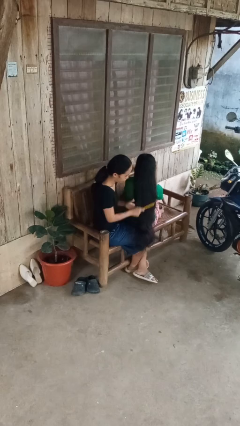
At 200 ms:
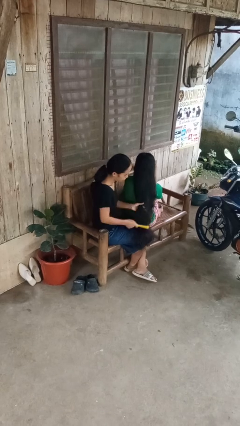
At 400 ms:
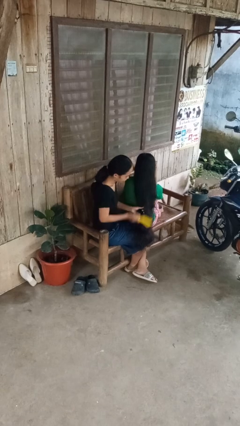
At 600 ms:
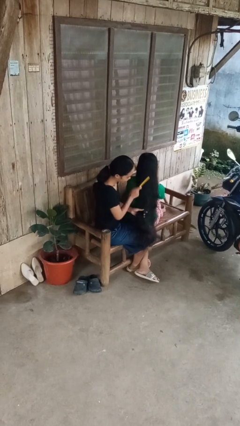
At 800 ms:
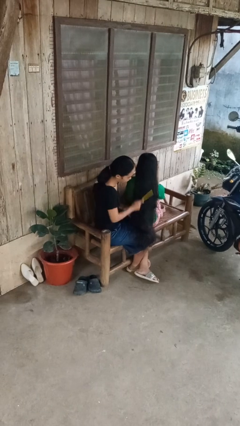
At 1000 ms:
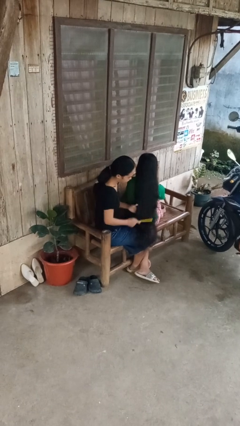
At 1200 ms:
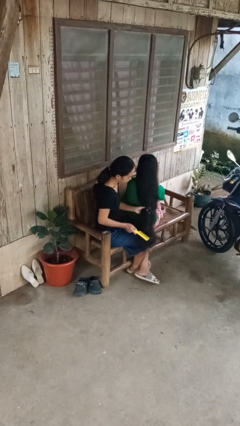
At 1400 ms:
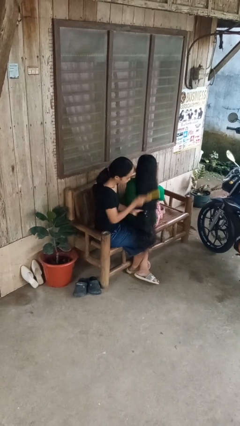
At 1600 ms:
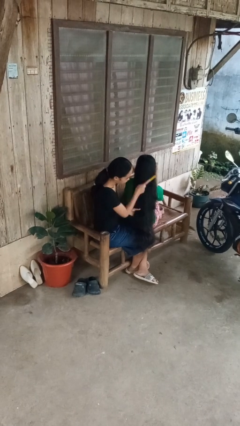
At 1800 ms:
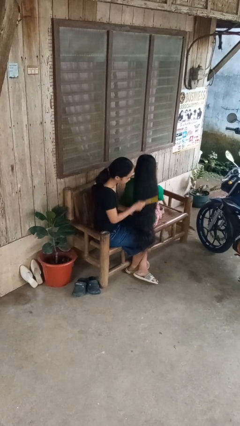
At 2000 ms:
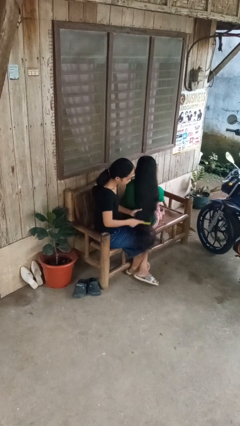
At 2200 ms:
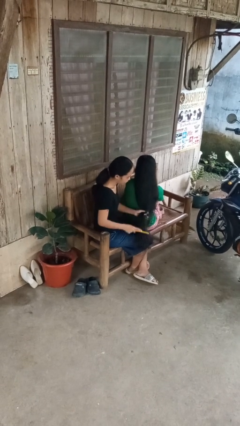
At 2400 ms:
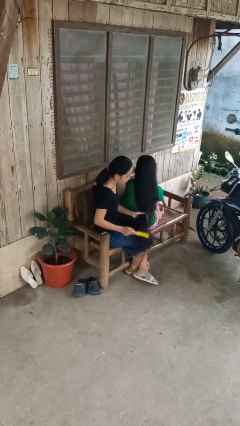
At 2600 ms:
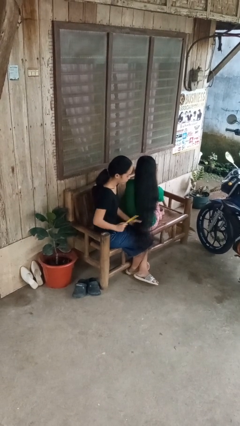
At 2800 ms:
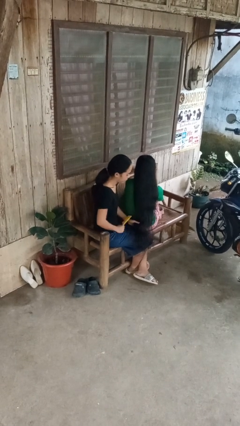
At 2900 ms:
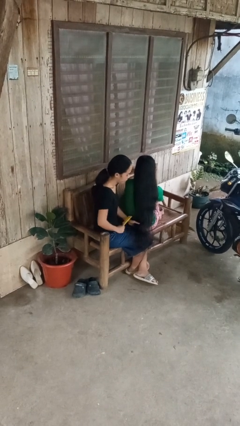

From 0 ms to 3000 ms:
person brushes hair of person

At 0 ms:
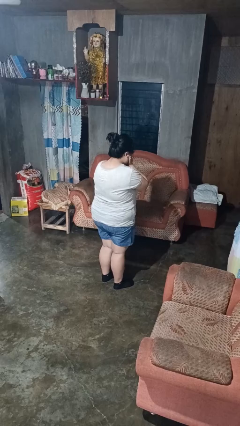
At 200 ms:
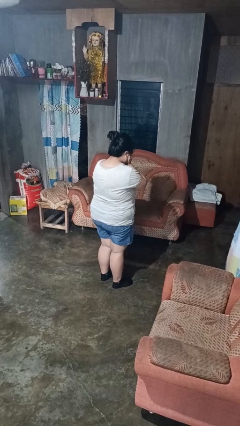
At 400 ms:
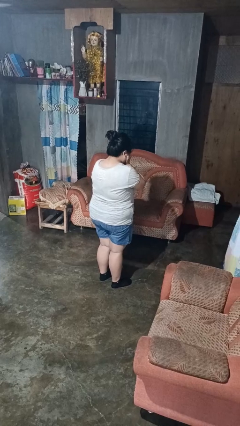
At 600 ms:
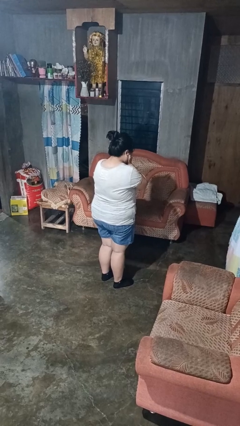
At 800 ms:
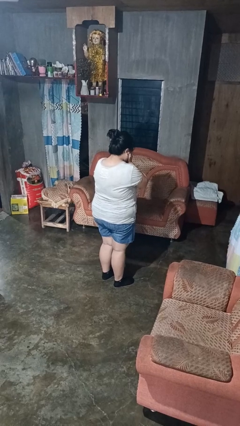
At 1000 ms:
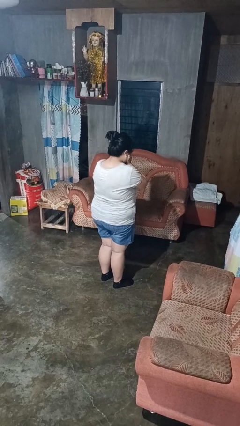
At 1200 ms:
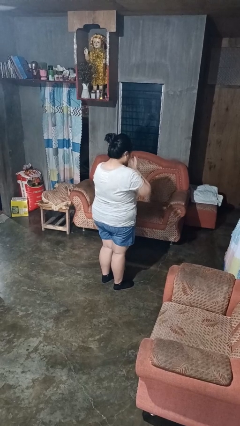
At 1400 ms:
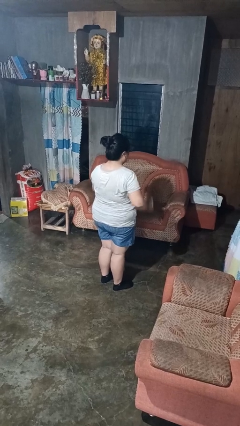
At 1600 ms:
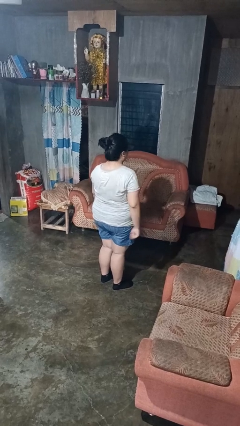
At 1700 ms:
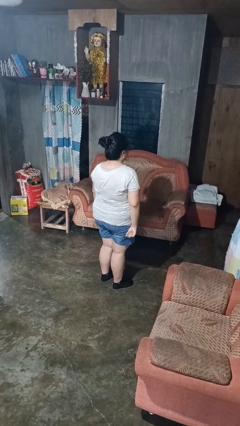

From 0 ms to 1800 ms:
person covers face with hands

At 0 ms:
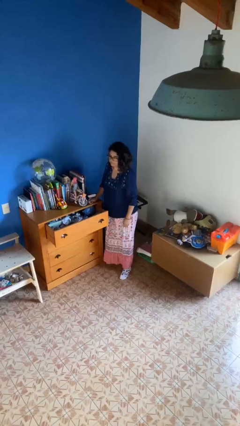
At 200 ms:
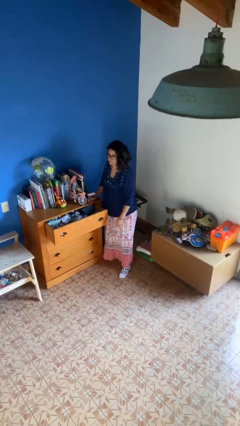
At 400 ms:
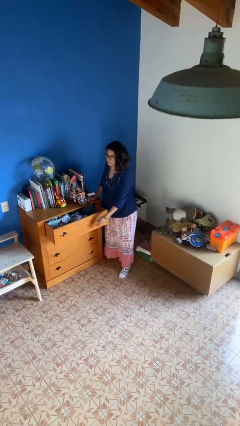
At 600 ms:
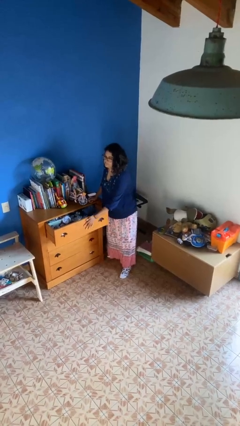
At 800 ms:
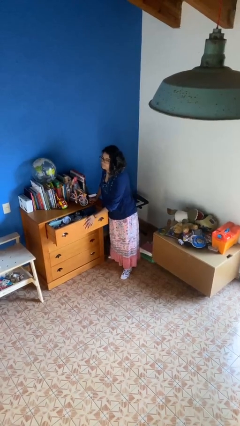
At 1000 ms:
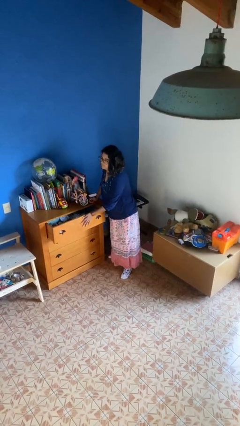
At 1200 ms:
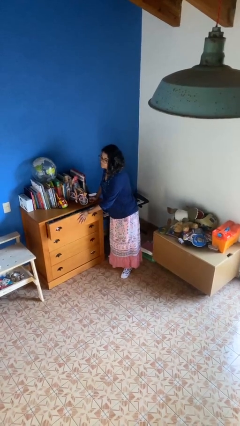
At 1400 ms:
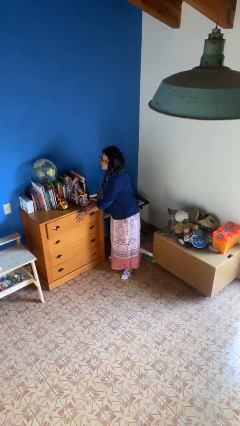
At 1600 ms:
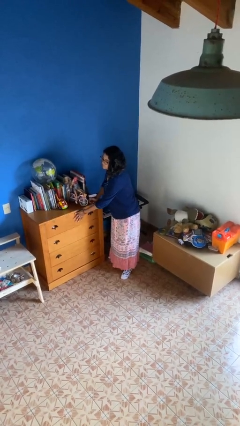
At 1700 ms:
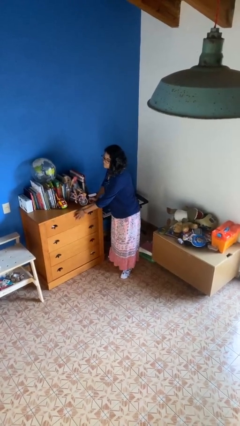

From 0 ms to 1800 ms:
person closes dresser drawer

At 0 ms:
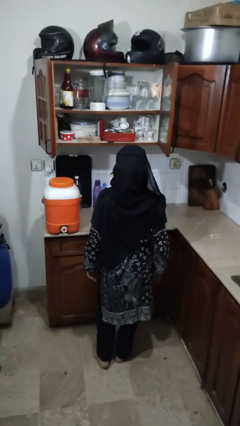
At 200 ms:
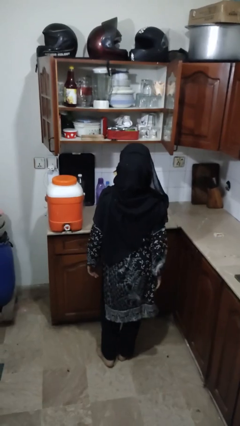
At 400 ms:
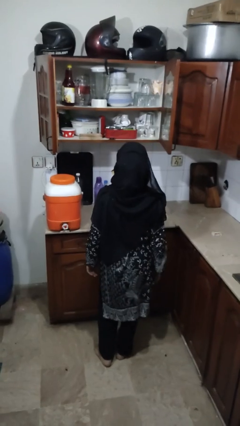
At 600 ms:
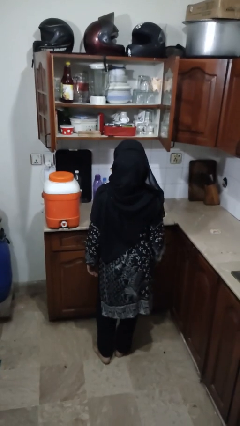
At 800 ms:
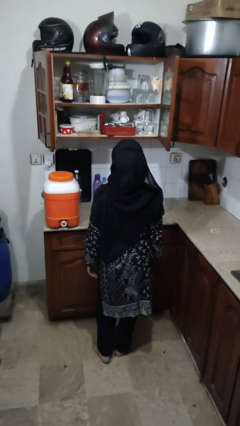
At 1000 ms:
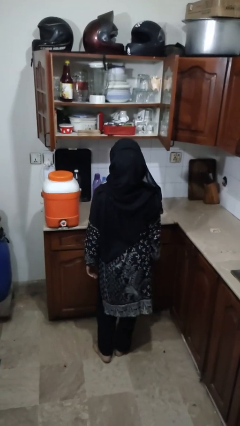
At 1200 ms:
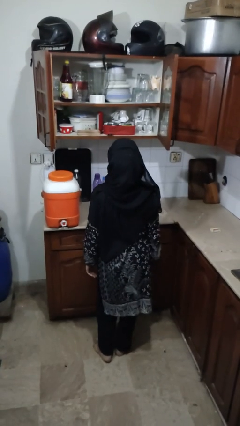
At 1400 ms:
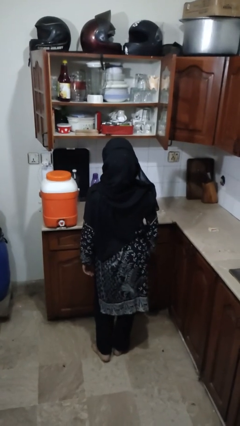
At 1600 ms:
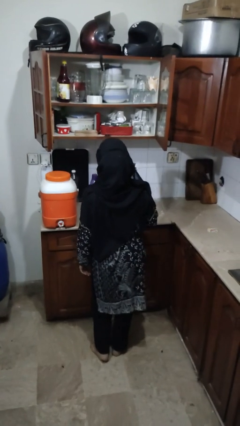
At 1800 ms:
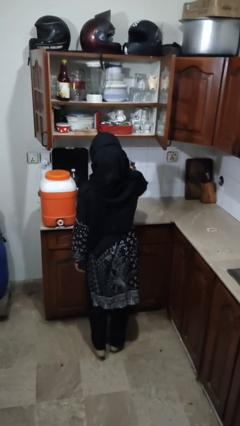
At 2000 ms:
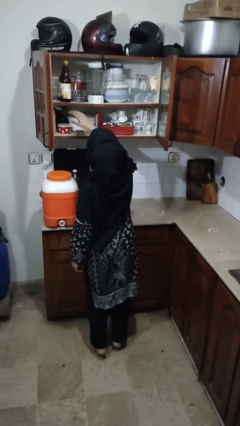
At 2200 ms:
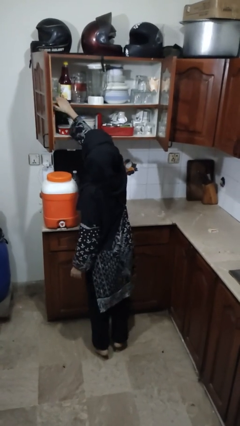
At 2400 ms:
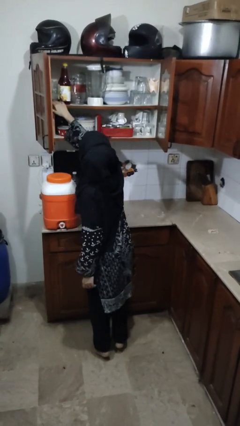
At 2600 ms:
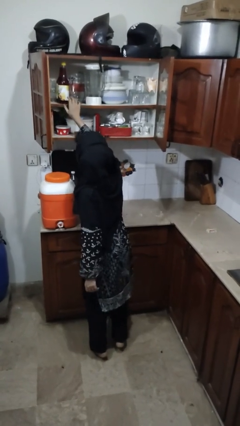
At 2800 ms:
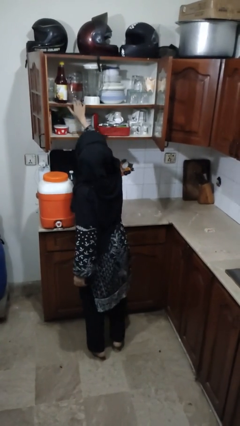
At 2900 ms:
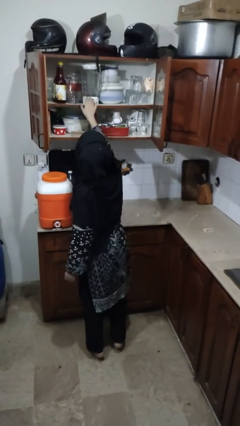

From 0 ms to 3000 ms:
person searches in cabinet

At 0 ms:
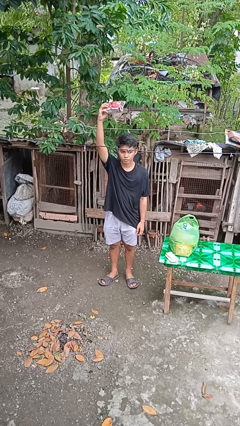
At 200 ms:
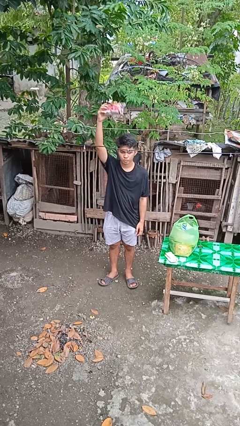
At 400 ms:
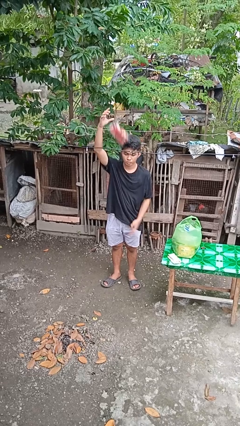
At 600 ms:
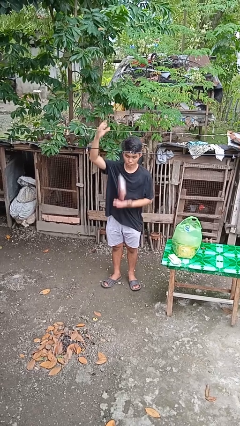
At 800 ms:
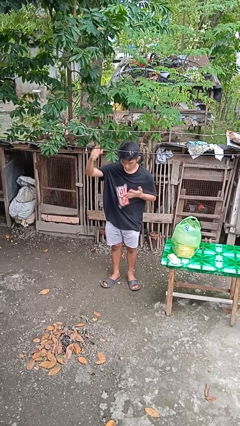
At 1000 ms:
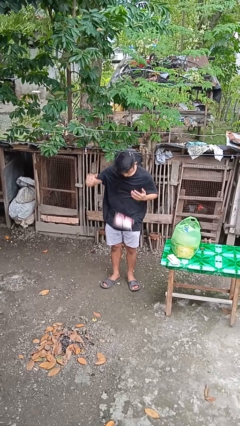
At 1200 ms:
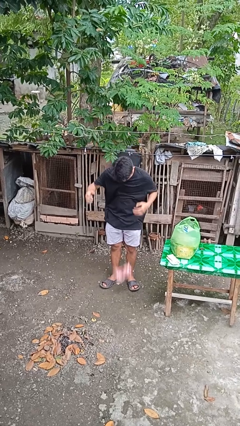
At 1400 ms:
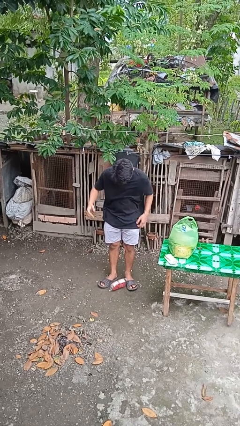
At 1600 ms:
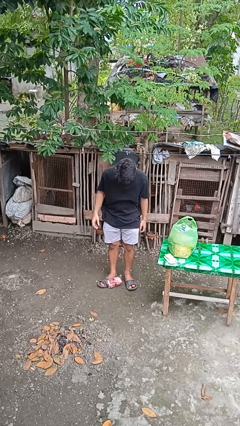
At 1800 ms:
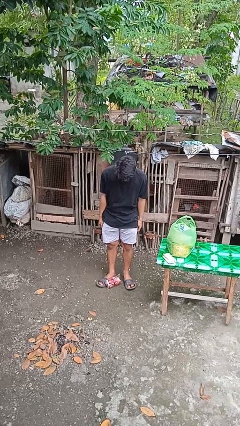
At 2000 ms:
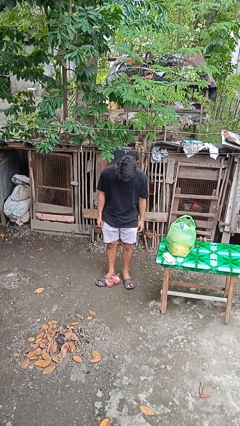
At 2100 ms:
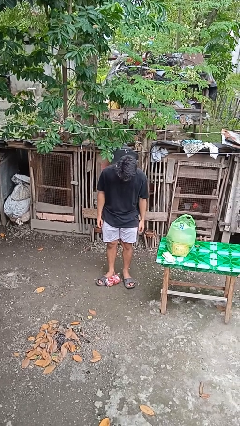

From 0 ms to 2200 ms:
person drops object

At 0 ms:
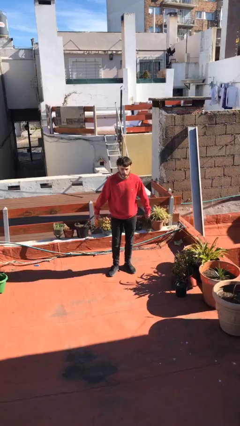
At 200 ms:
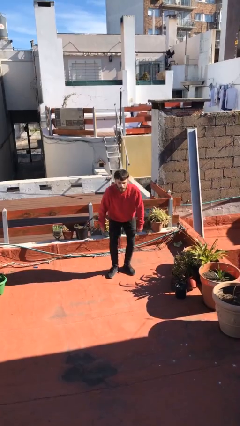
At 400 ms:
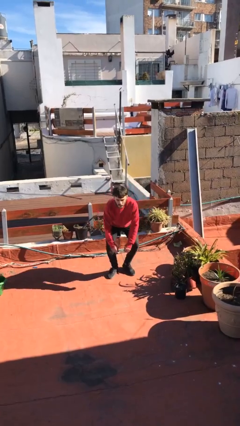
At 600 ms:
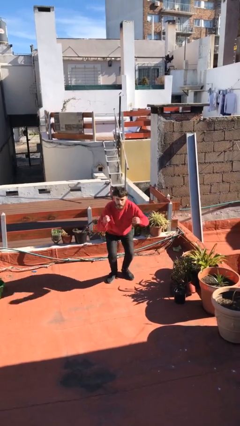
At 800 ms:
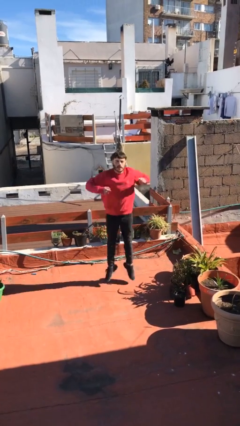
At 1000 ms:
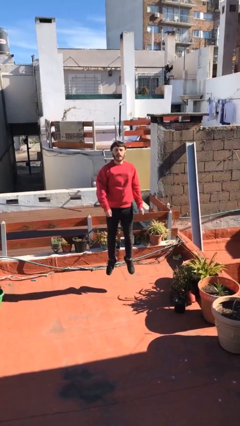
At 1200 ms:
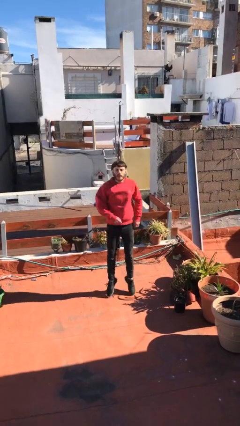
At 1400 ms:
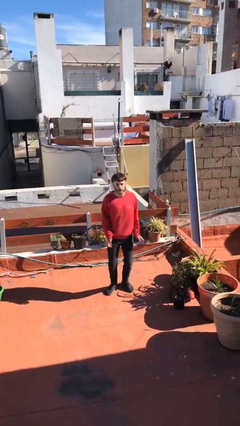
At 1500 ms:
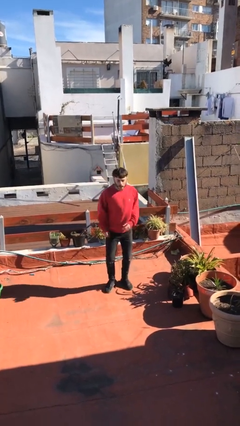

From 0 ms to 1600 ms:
person jumps

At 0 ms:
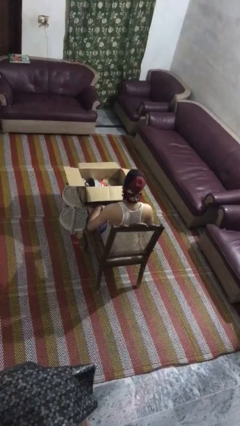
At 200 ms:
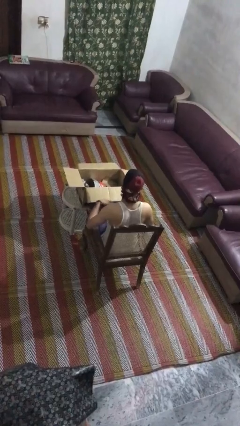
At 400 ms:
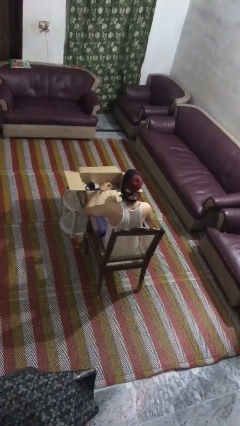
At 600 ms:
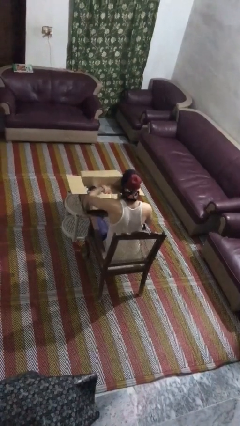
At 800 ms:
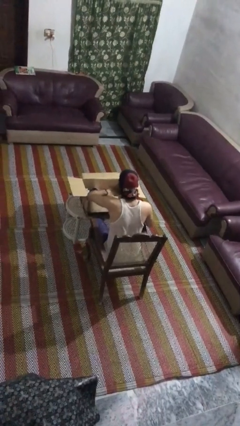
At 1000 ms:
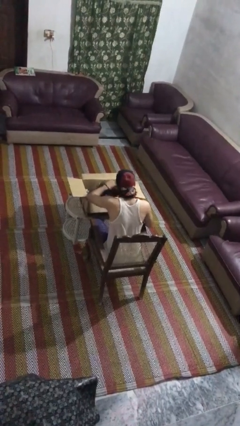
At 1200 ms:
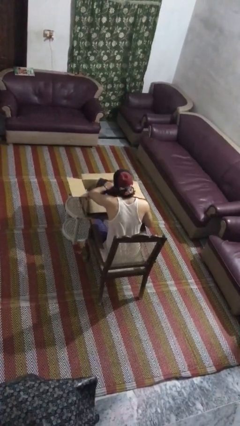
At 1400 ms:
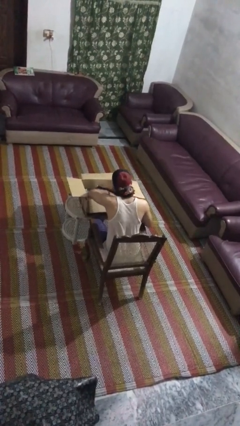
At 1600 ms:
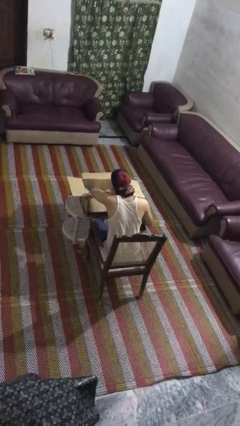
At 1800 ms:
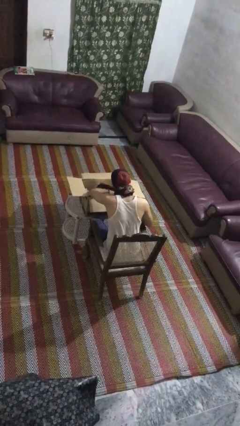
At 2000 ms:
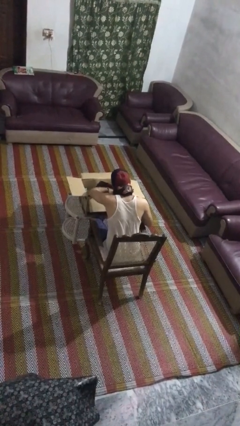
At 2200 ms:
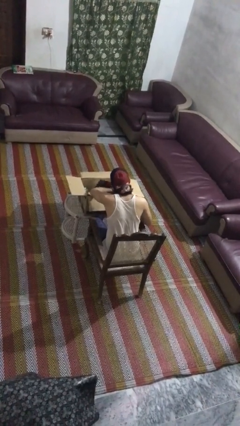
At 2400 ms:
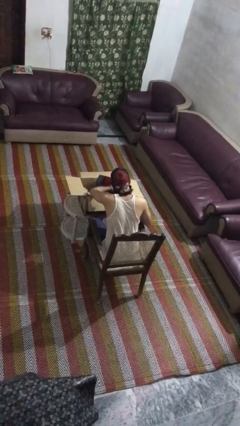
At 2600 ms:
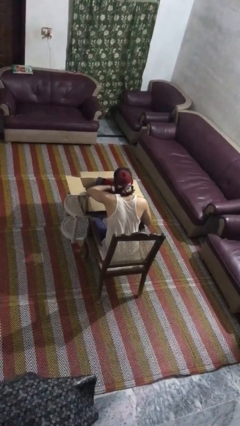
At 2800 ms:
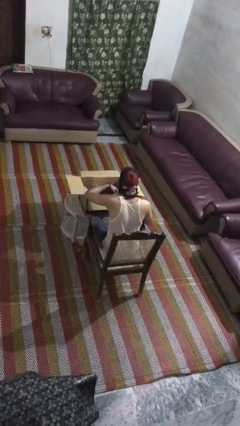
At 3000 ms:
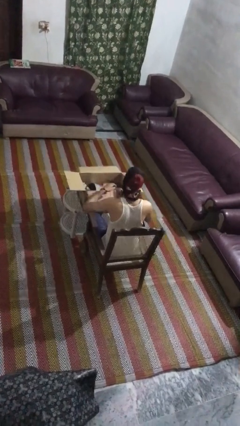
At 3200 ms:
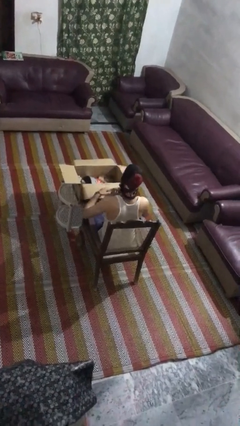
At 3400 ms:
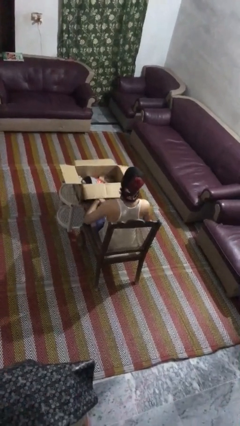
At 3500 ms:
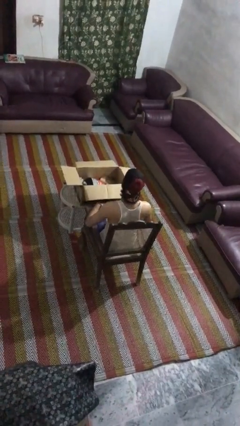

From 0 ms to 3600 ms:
person searches in box
